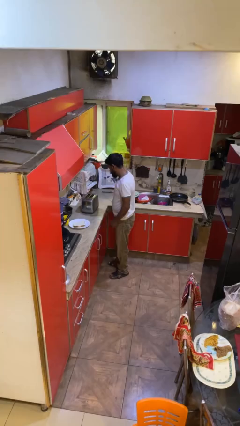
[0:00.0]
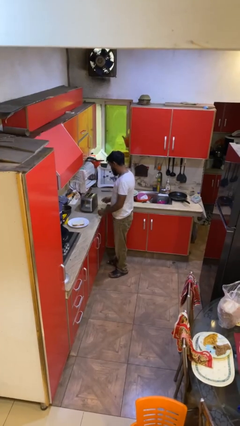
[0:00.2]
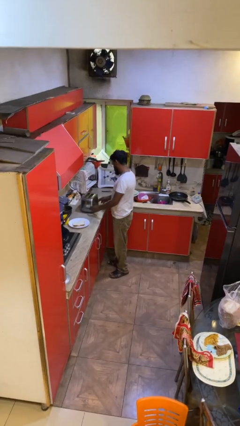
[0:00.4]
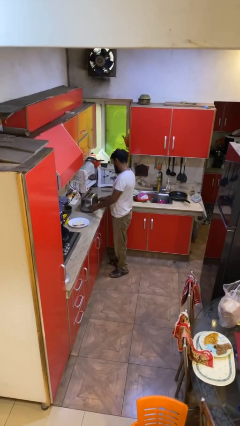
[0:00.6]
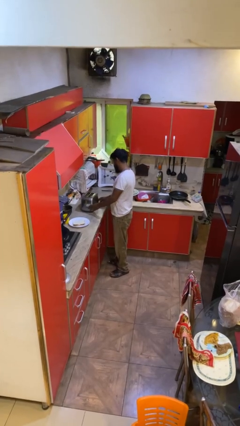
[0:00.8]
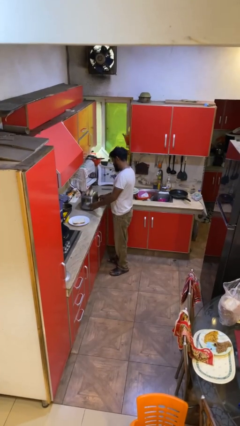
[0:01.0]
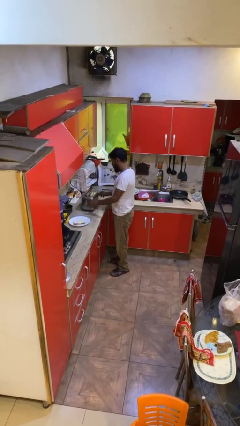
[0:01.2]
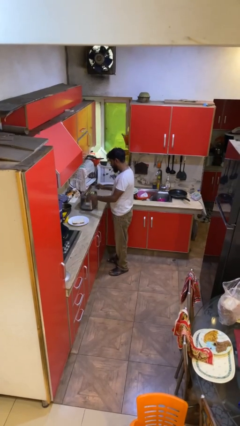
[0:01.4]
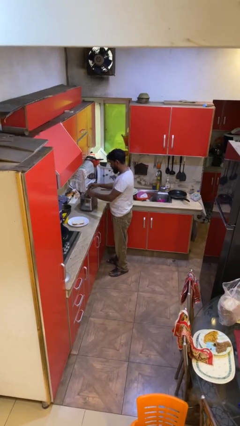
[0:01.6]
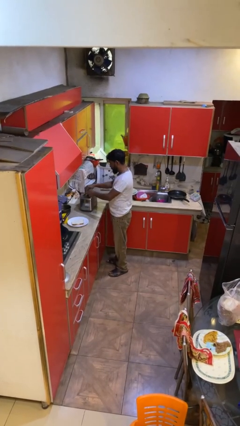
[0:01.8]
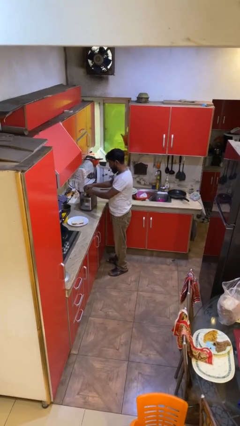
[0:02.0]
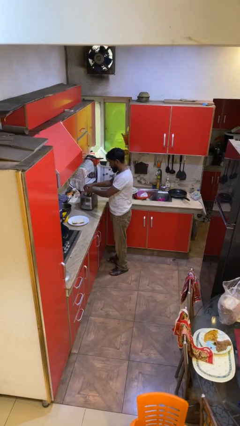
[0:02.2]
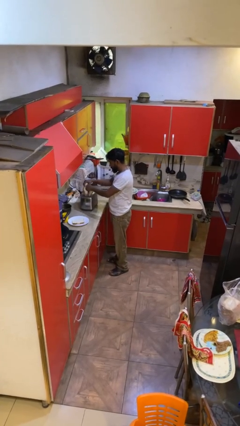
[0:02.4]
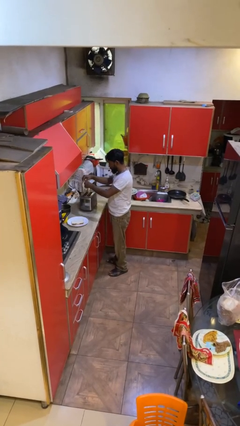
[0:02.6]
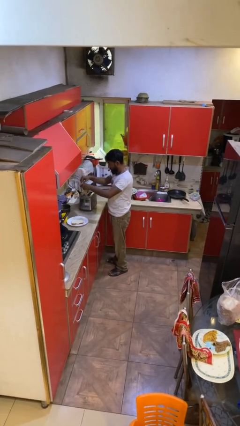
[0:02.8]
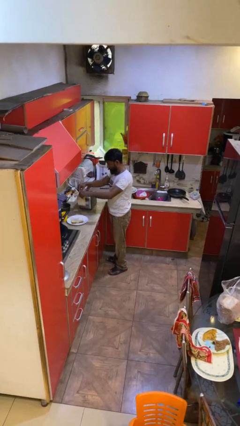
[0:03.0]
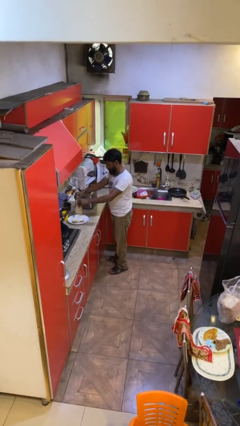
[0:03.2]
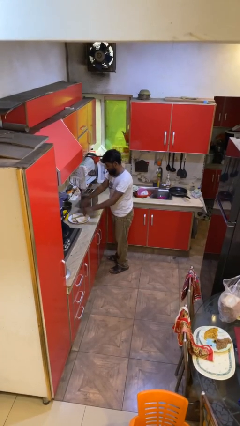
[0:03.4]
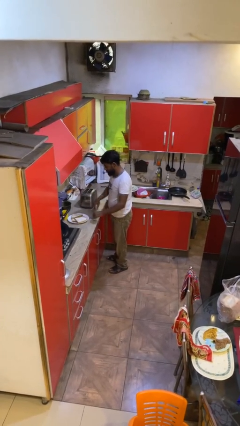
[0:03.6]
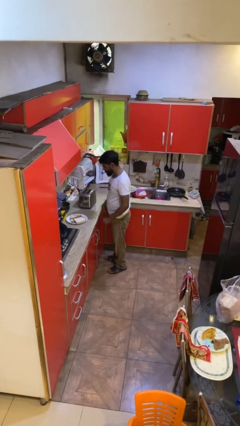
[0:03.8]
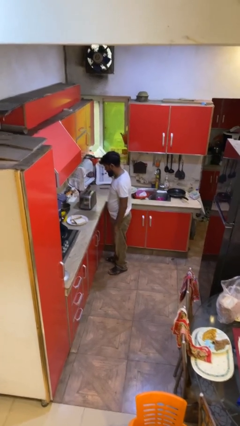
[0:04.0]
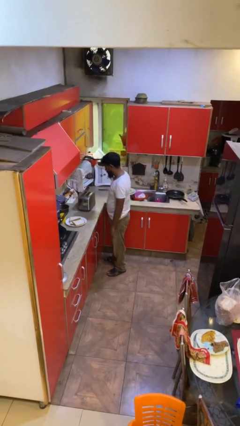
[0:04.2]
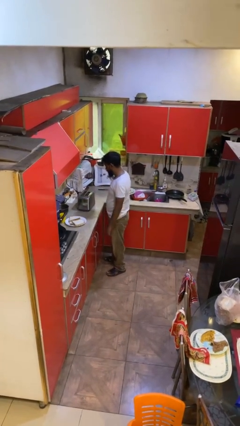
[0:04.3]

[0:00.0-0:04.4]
person takes object from toaster

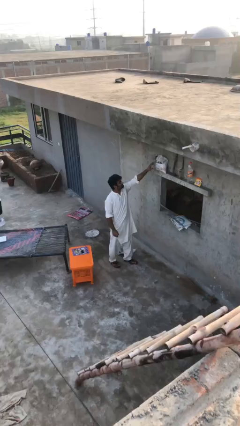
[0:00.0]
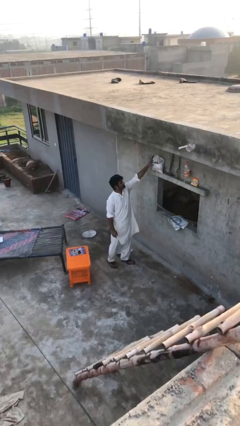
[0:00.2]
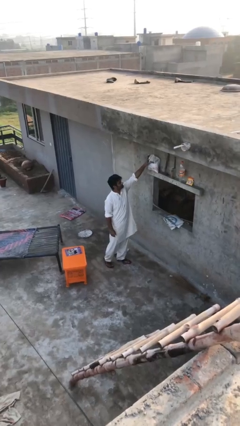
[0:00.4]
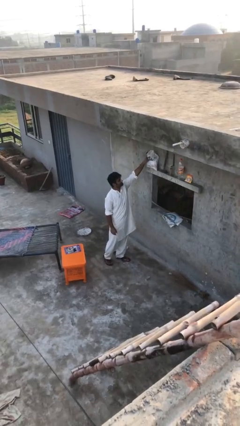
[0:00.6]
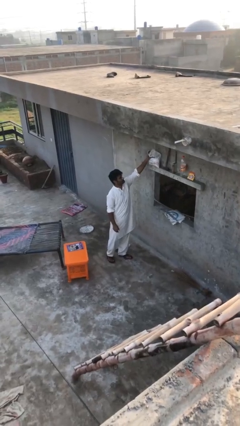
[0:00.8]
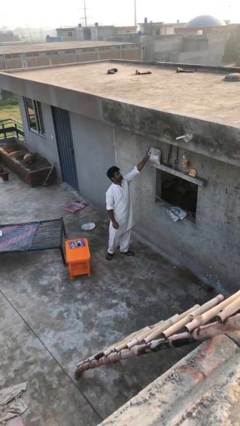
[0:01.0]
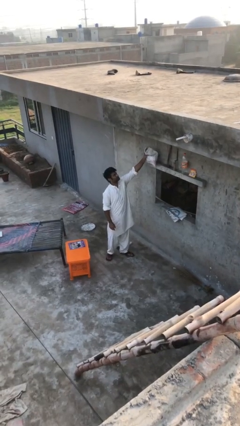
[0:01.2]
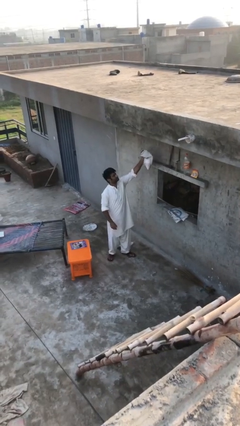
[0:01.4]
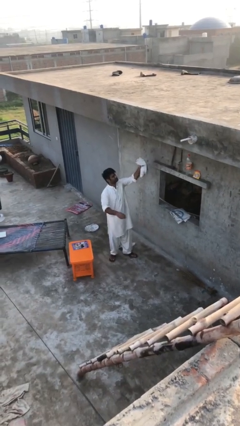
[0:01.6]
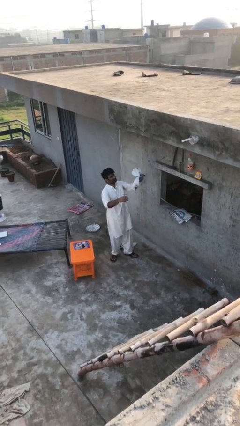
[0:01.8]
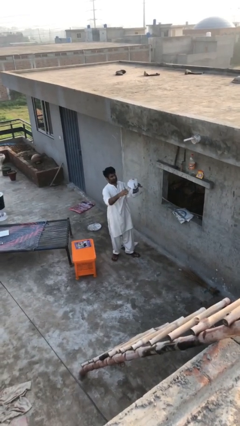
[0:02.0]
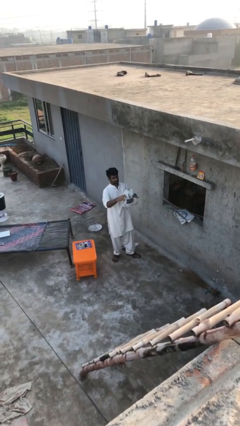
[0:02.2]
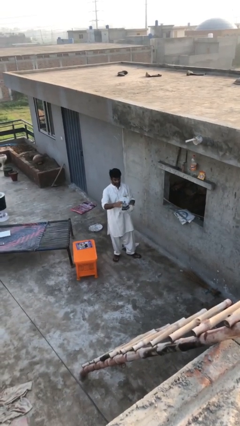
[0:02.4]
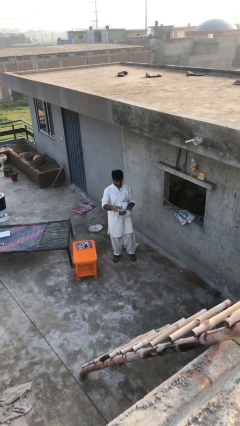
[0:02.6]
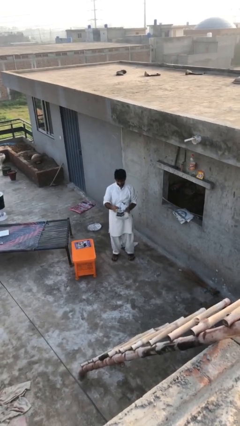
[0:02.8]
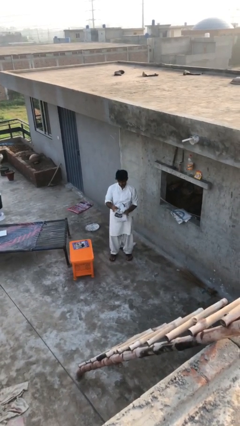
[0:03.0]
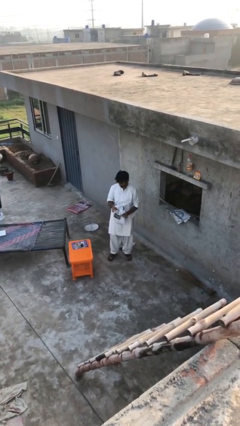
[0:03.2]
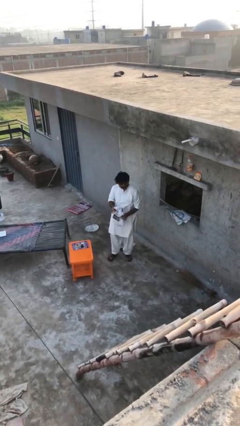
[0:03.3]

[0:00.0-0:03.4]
person picks up object from shelf

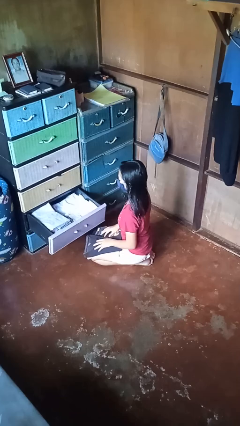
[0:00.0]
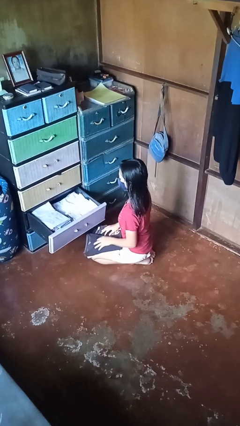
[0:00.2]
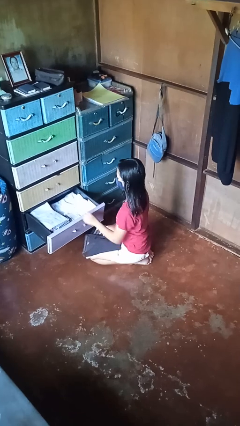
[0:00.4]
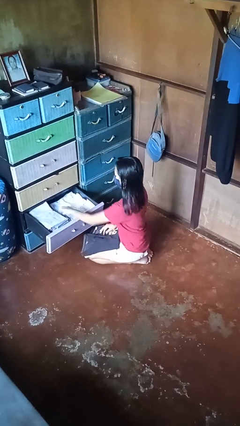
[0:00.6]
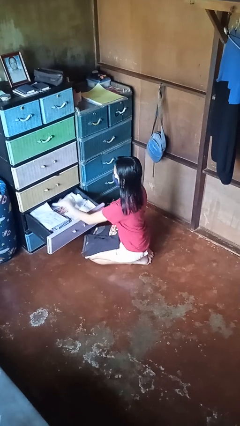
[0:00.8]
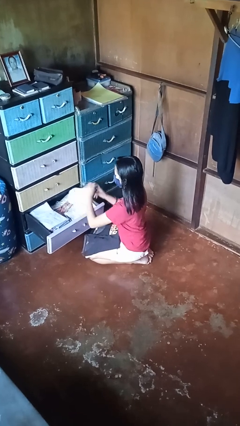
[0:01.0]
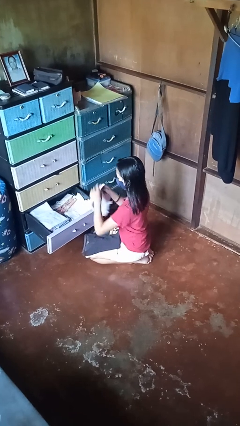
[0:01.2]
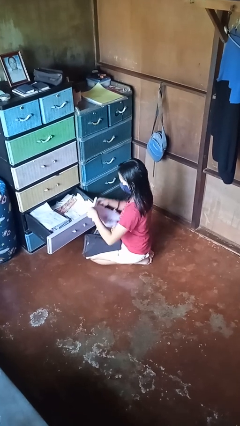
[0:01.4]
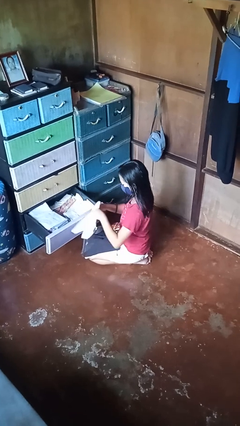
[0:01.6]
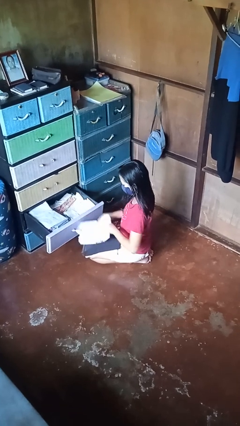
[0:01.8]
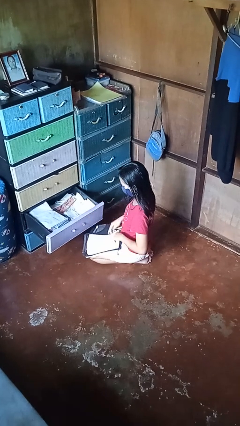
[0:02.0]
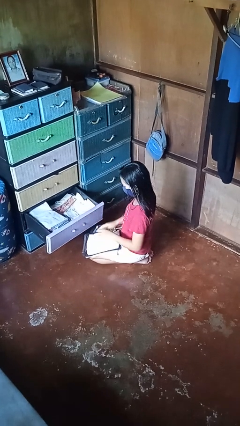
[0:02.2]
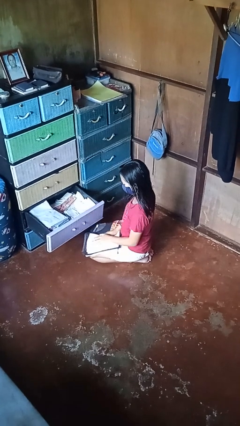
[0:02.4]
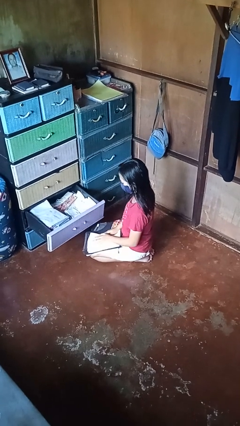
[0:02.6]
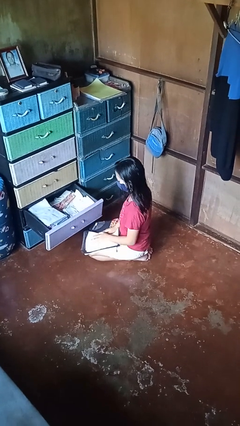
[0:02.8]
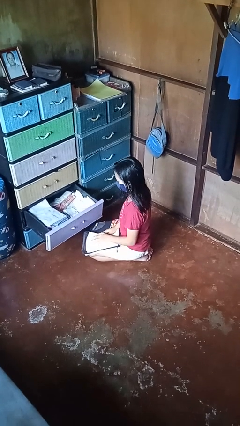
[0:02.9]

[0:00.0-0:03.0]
person takes clothes from dresser

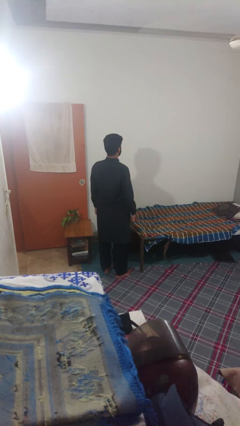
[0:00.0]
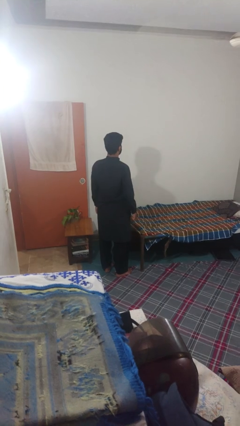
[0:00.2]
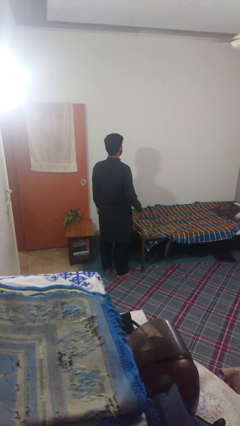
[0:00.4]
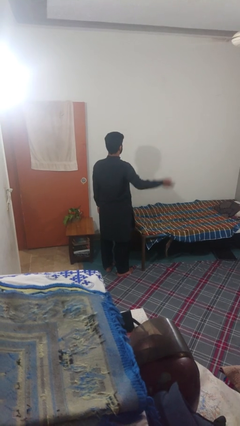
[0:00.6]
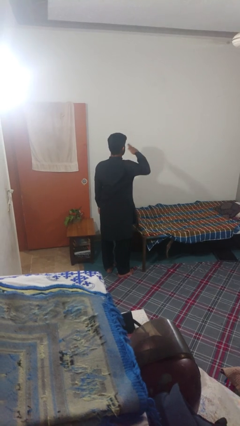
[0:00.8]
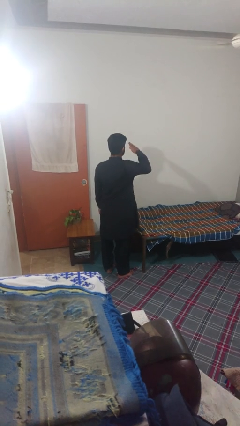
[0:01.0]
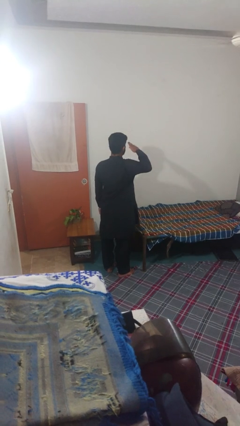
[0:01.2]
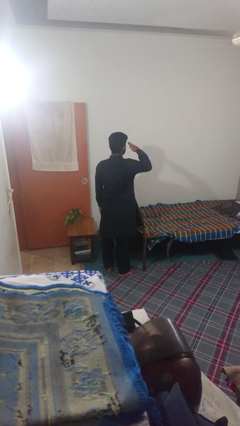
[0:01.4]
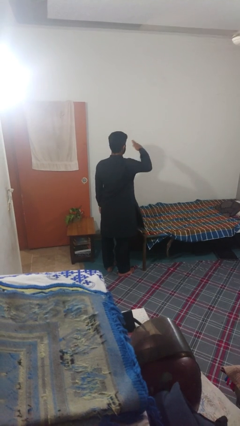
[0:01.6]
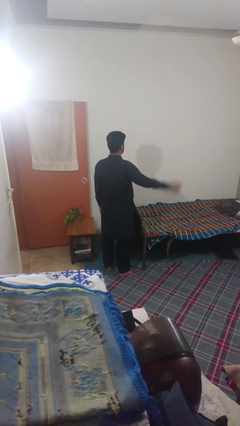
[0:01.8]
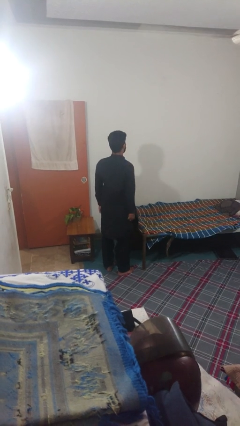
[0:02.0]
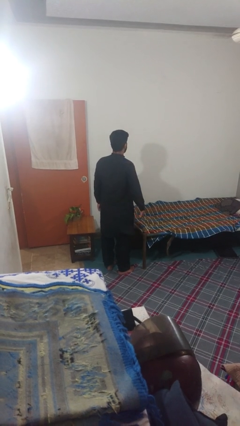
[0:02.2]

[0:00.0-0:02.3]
person salutes

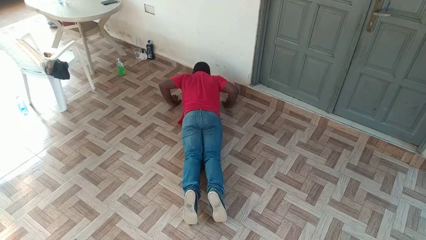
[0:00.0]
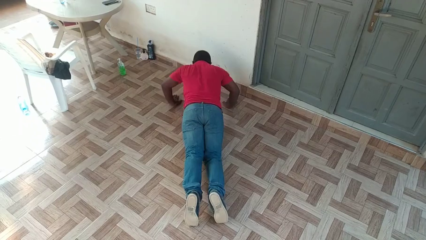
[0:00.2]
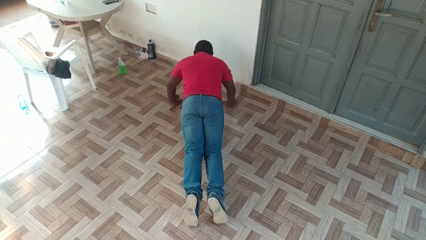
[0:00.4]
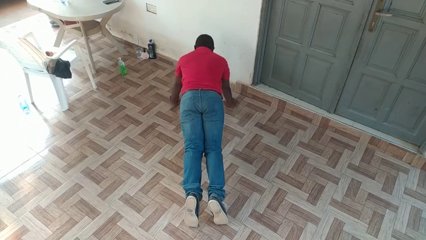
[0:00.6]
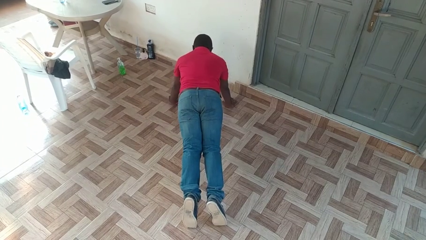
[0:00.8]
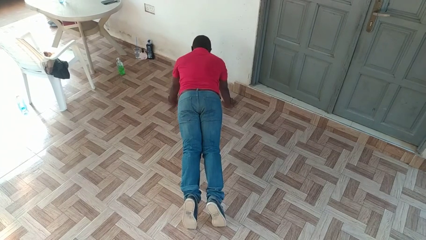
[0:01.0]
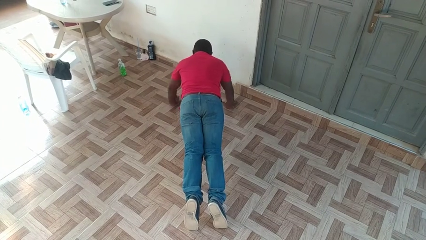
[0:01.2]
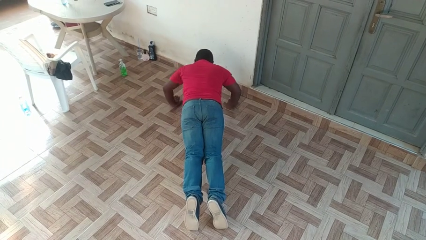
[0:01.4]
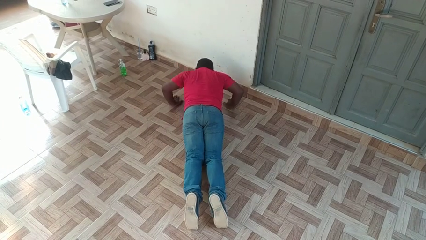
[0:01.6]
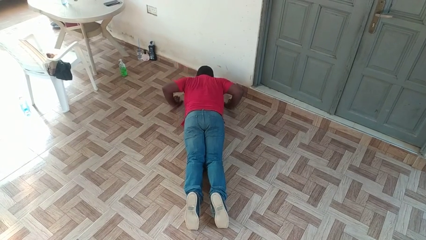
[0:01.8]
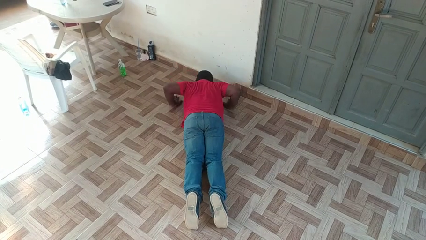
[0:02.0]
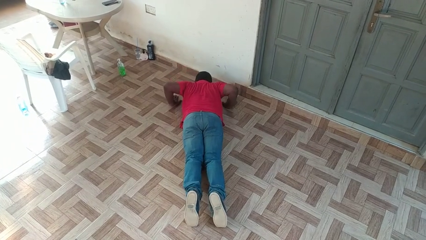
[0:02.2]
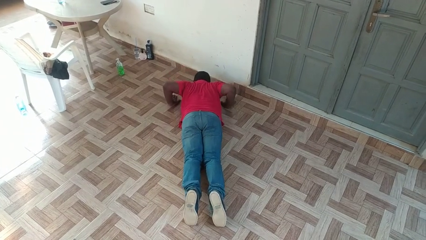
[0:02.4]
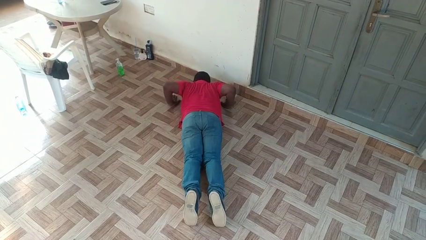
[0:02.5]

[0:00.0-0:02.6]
person exercises with pushup

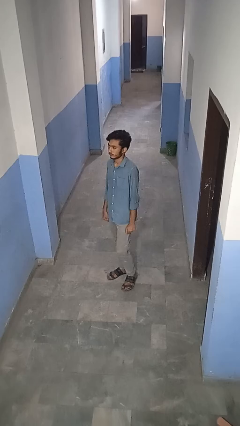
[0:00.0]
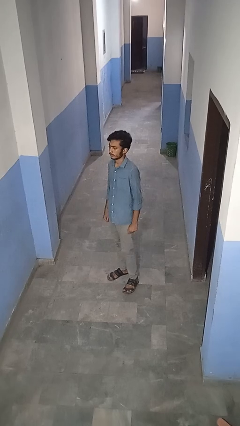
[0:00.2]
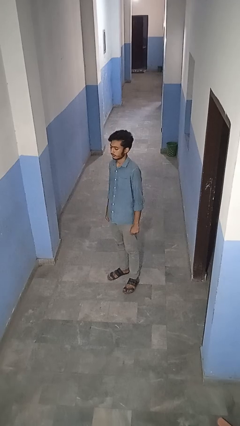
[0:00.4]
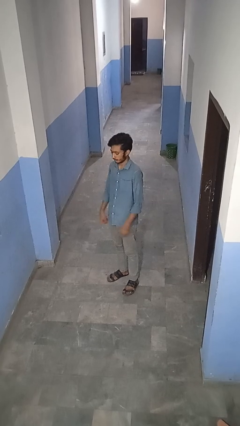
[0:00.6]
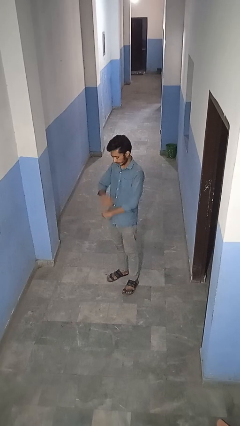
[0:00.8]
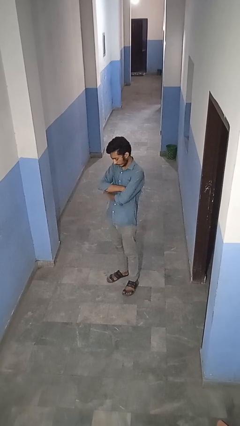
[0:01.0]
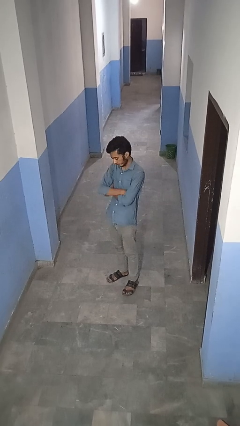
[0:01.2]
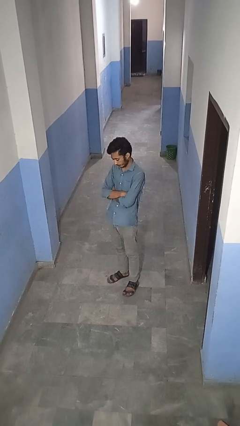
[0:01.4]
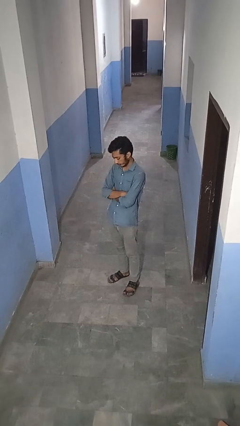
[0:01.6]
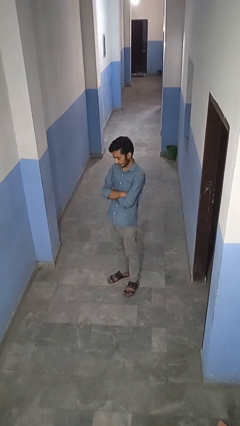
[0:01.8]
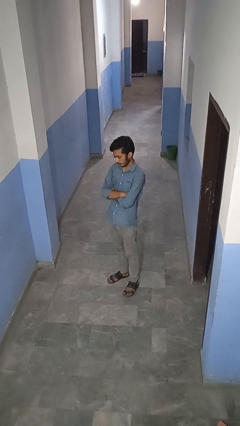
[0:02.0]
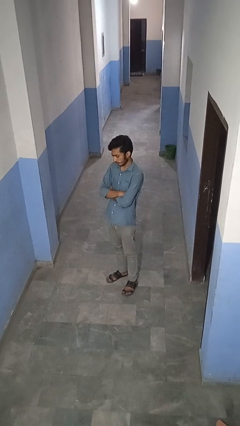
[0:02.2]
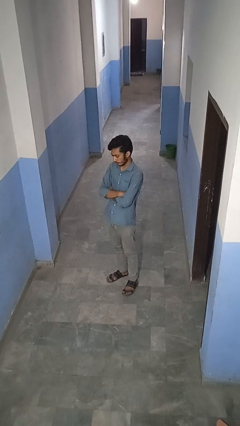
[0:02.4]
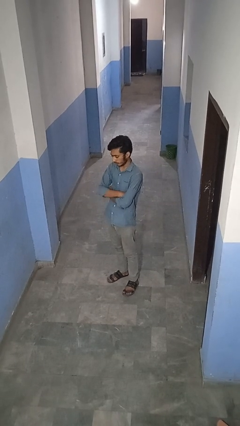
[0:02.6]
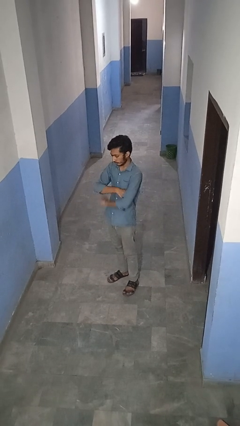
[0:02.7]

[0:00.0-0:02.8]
person crosses arms
